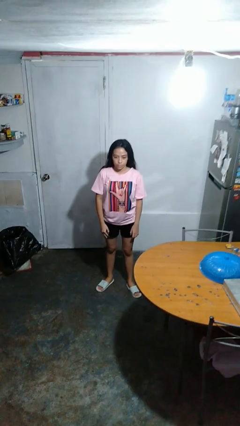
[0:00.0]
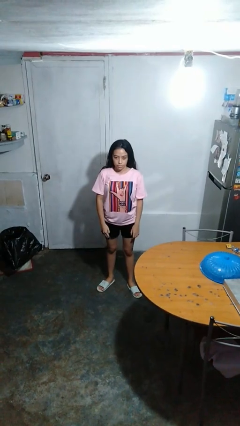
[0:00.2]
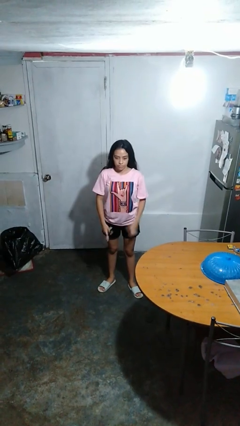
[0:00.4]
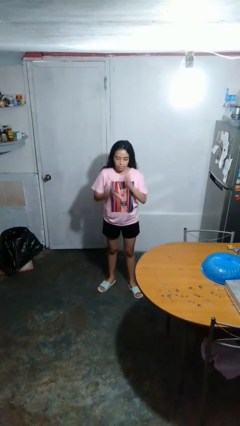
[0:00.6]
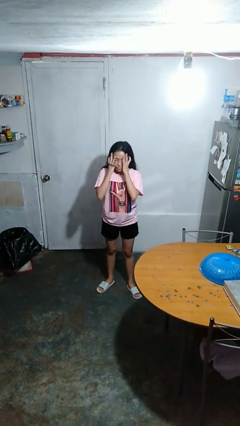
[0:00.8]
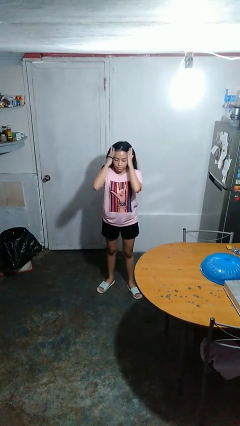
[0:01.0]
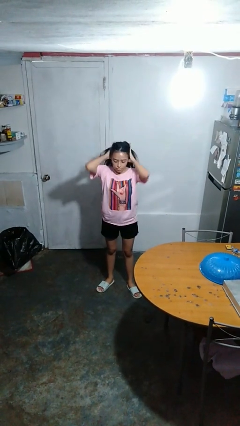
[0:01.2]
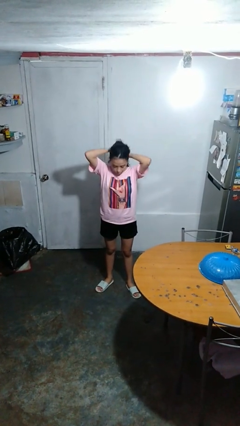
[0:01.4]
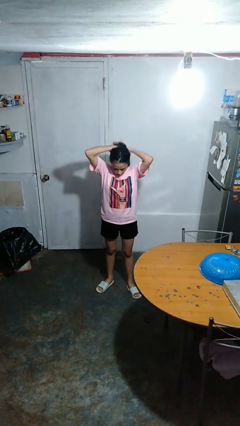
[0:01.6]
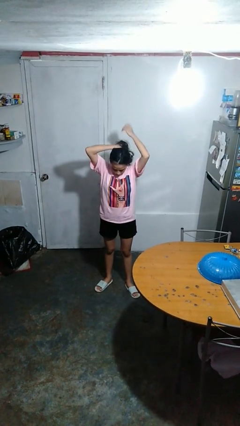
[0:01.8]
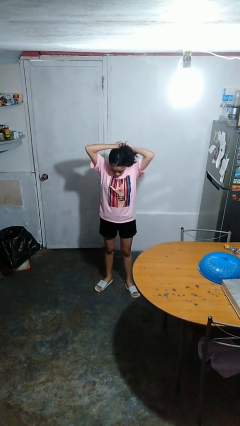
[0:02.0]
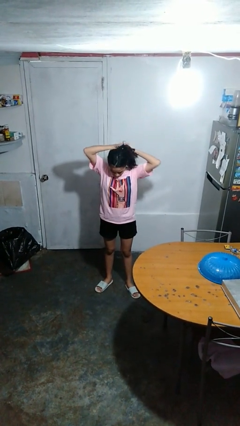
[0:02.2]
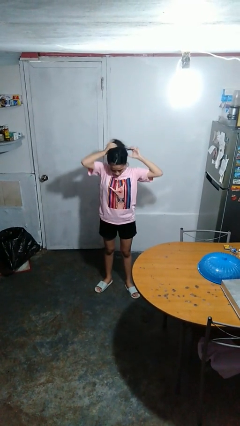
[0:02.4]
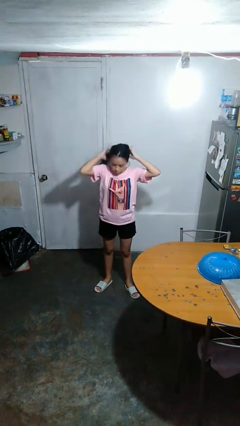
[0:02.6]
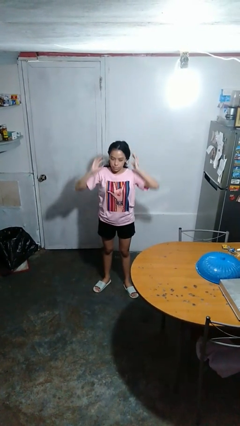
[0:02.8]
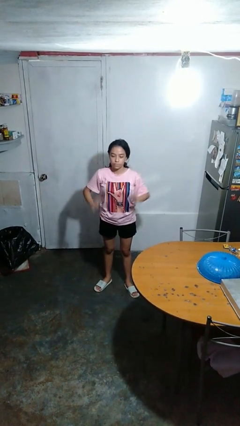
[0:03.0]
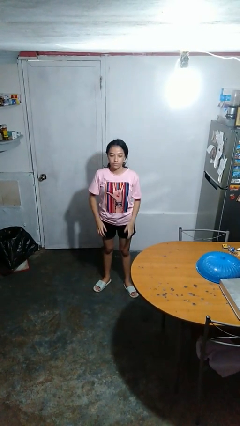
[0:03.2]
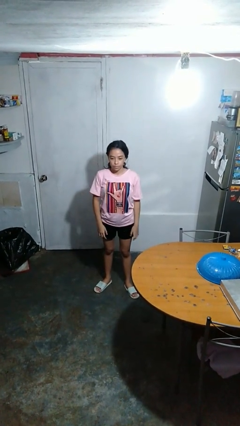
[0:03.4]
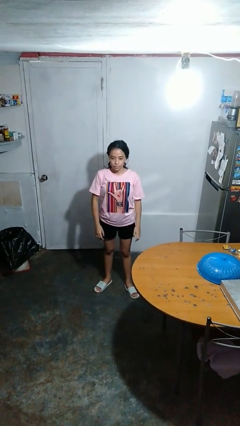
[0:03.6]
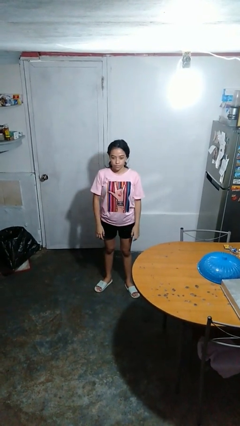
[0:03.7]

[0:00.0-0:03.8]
person puts hair in ponytail

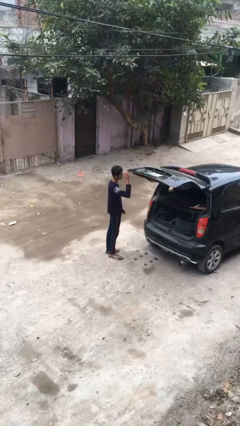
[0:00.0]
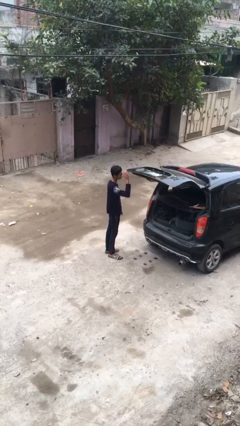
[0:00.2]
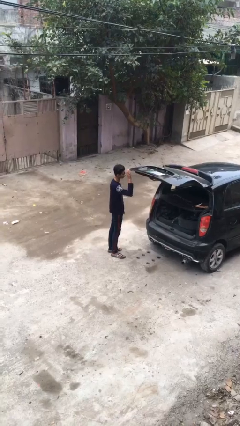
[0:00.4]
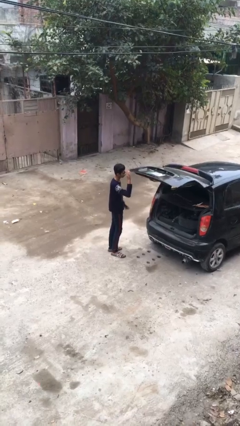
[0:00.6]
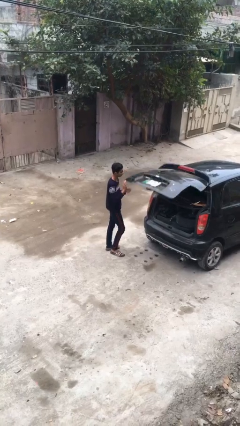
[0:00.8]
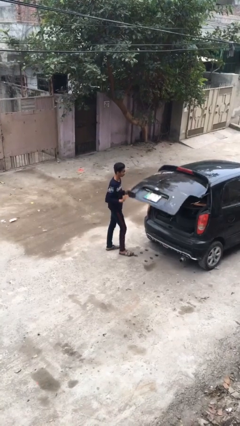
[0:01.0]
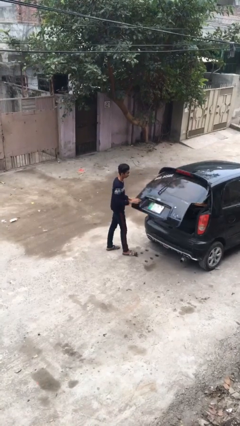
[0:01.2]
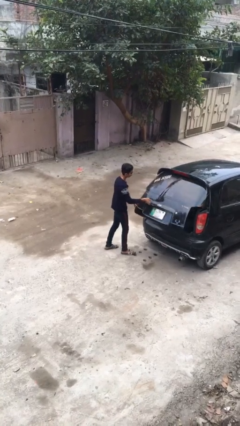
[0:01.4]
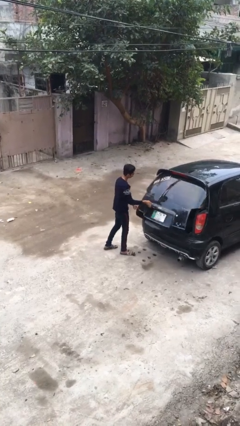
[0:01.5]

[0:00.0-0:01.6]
person closes car trunk

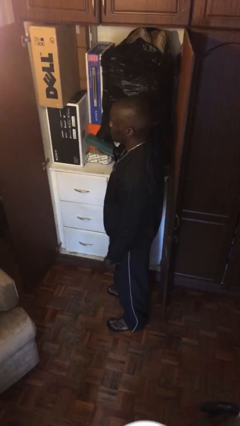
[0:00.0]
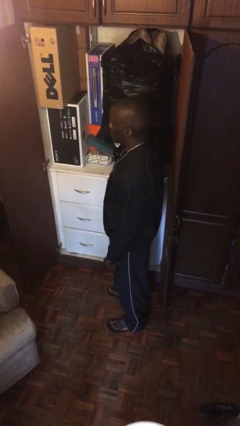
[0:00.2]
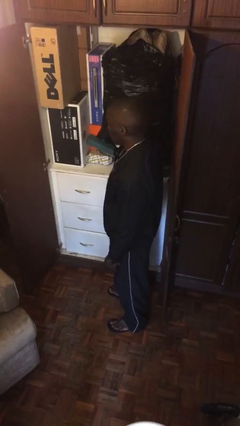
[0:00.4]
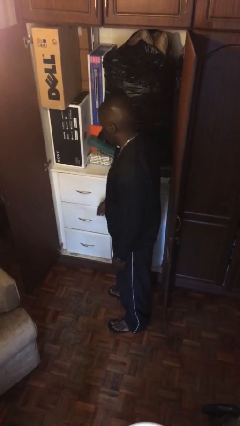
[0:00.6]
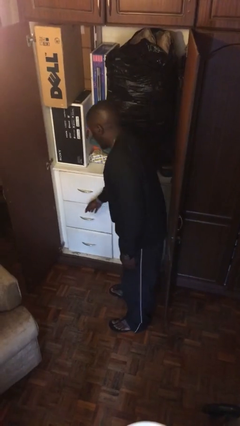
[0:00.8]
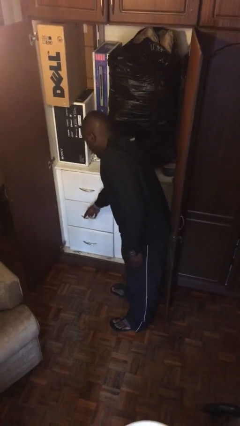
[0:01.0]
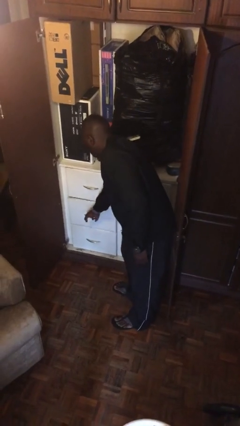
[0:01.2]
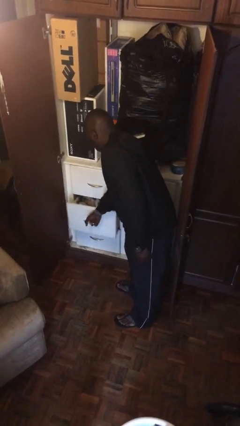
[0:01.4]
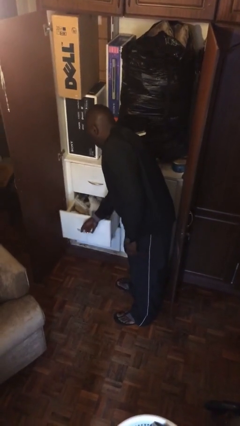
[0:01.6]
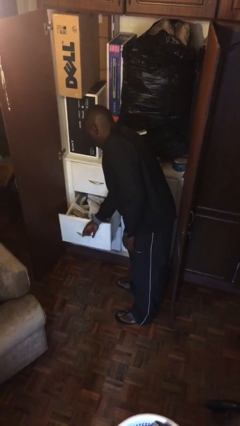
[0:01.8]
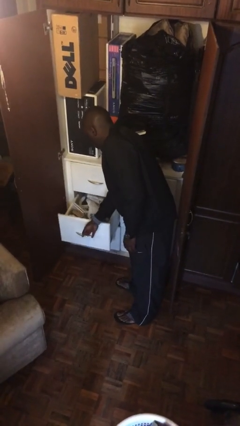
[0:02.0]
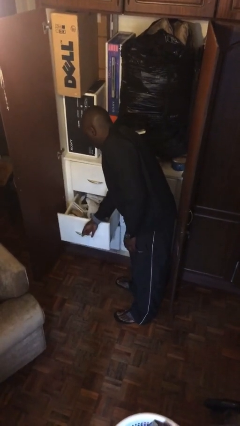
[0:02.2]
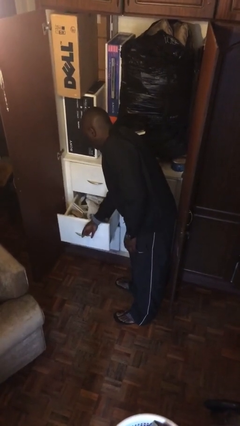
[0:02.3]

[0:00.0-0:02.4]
person opens dresser drawer

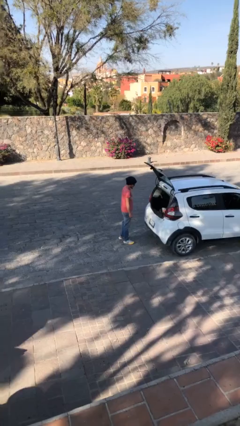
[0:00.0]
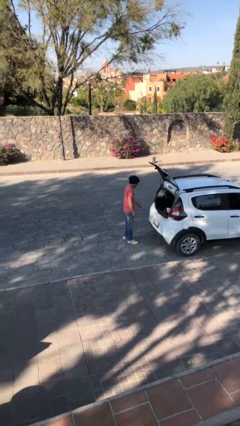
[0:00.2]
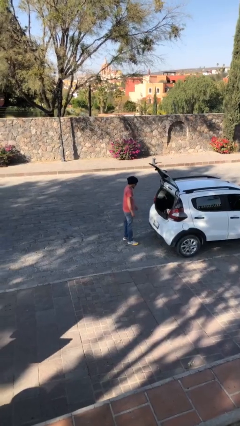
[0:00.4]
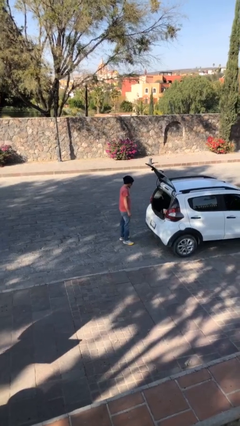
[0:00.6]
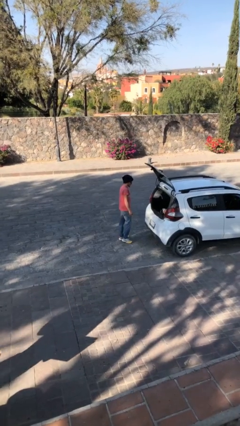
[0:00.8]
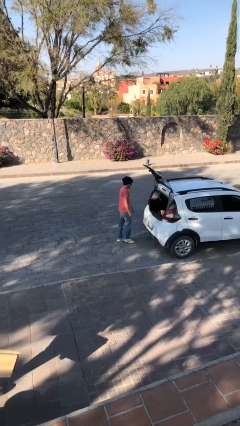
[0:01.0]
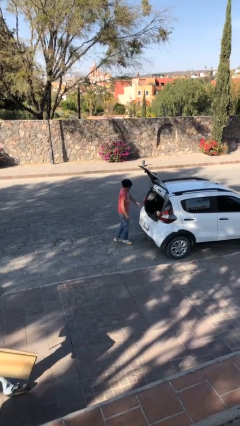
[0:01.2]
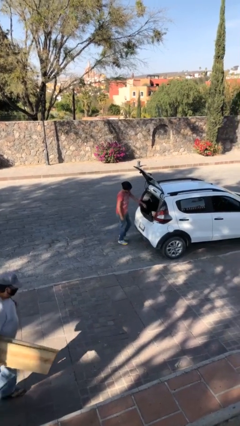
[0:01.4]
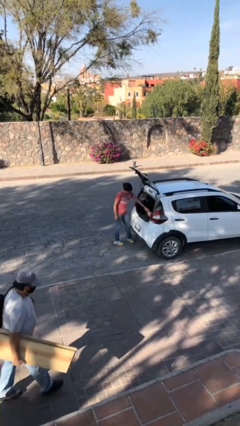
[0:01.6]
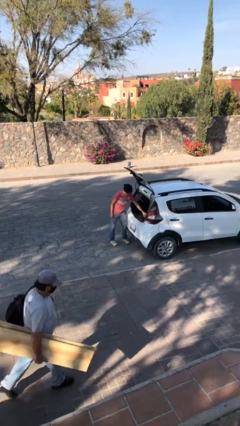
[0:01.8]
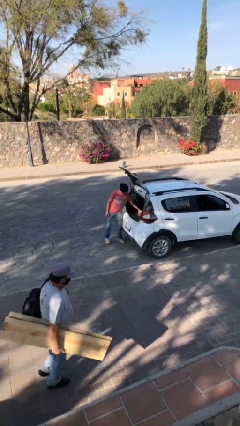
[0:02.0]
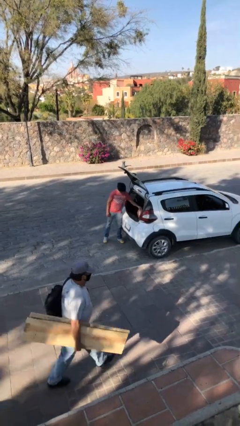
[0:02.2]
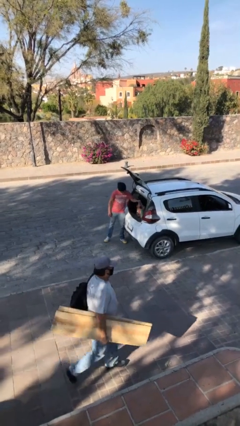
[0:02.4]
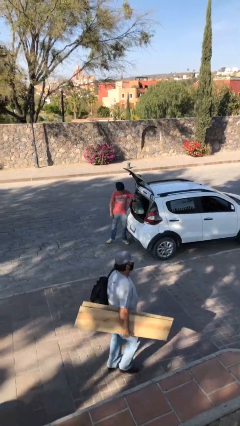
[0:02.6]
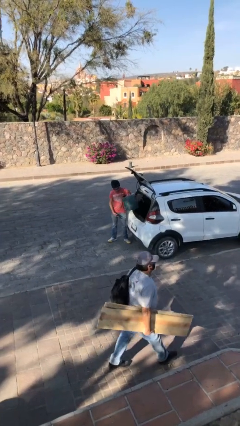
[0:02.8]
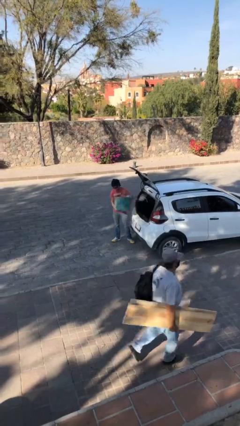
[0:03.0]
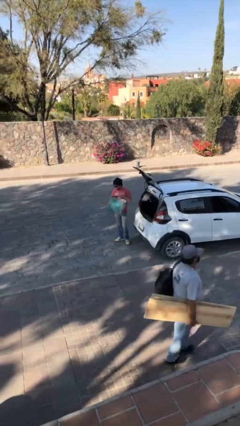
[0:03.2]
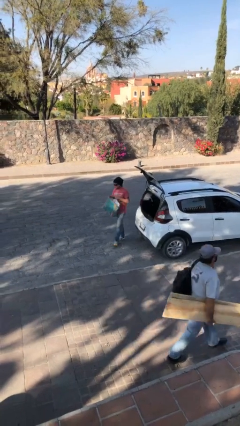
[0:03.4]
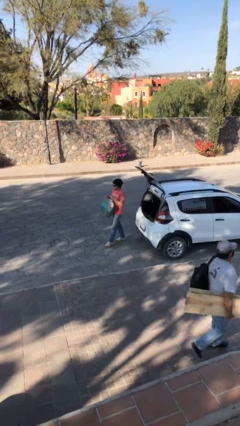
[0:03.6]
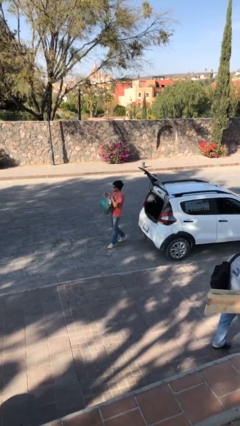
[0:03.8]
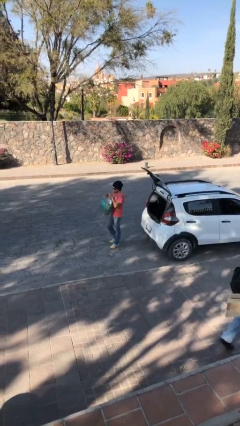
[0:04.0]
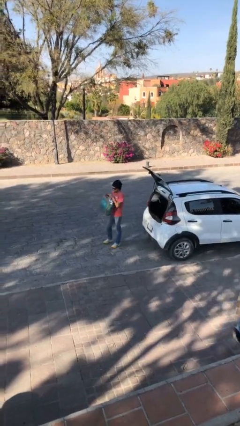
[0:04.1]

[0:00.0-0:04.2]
person unloads car

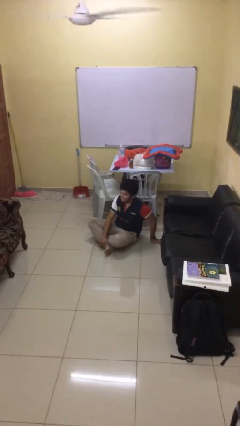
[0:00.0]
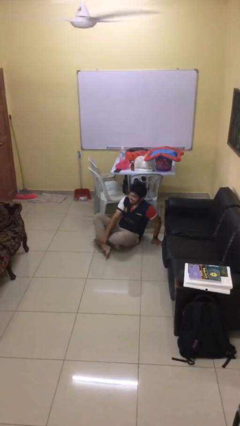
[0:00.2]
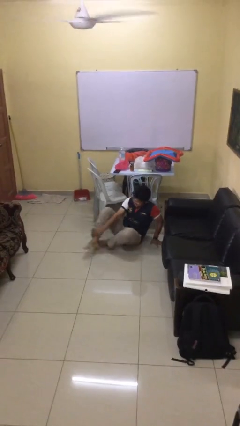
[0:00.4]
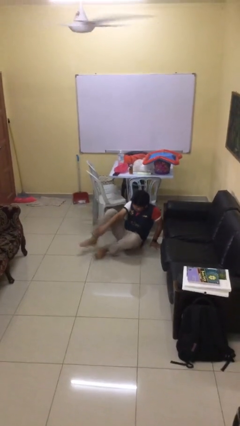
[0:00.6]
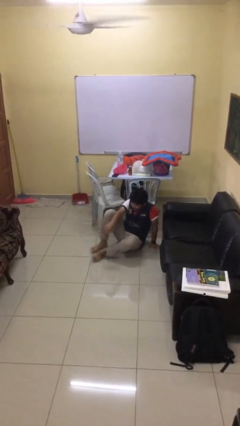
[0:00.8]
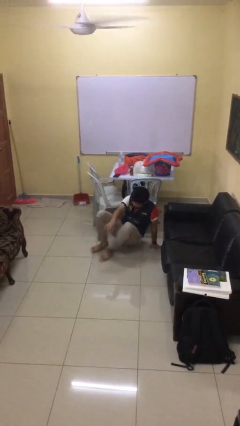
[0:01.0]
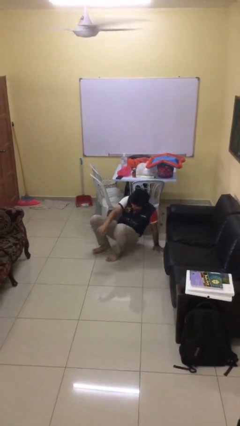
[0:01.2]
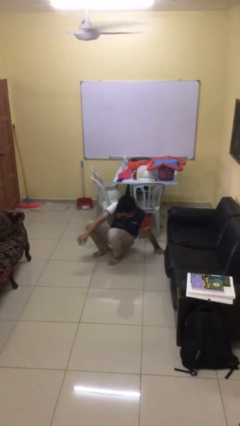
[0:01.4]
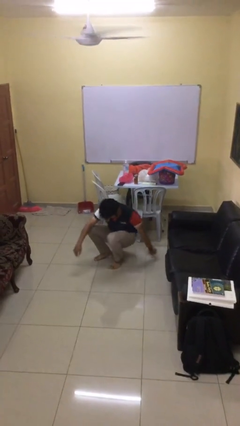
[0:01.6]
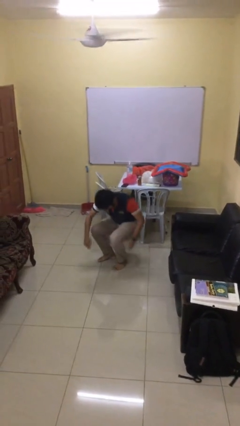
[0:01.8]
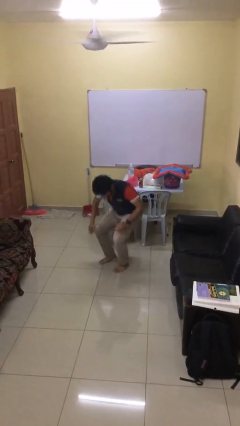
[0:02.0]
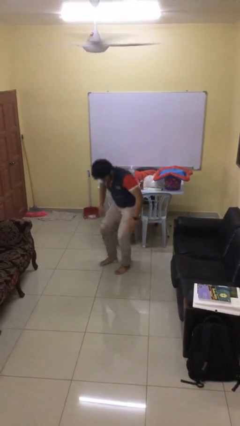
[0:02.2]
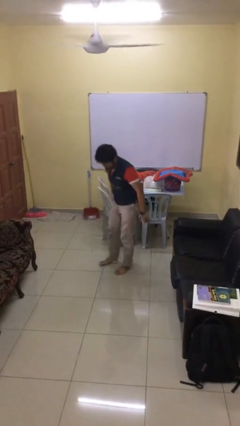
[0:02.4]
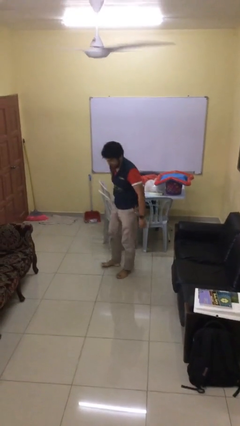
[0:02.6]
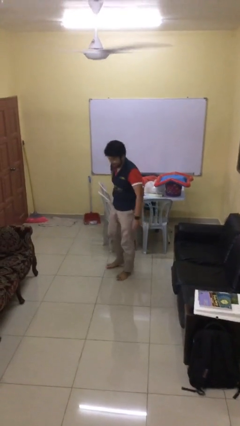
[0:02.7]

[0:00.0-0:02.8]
person stands up from floor

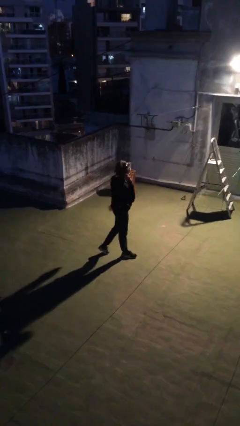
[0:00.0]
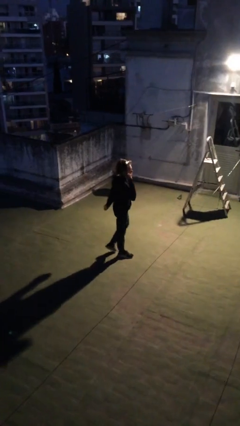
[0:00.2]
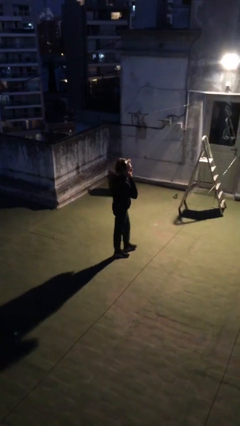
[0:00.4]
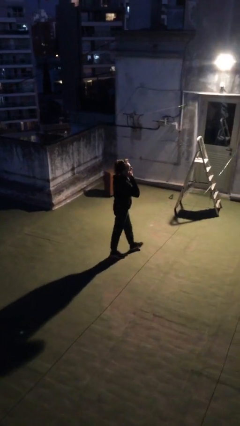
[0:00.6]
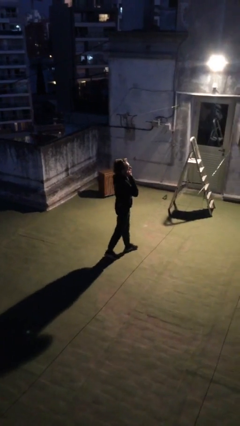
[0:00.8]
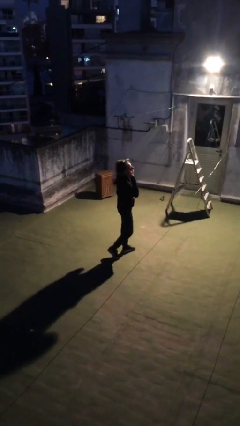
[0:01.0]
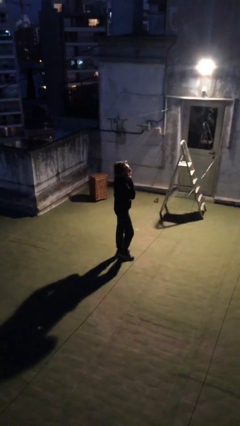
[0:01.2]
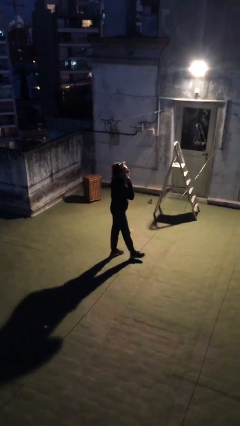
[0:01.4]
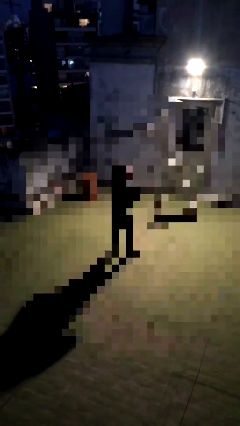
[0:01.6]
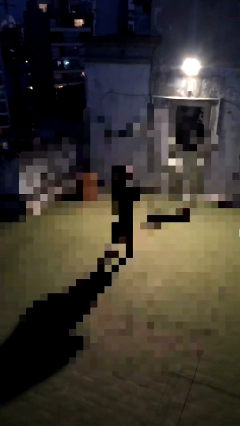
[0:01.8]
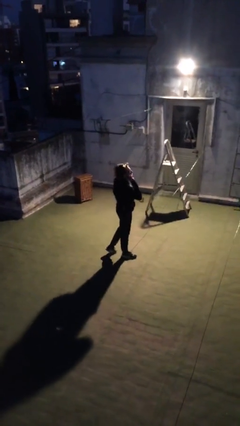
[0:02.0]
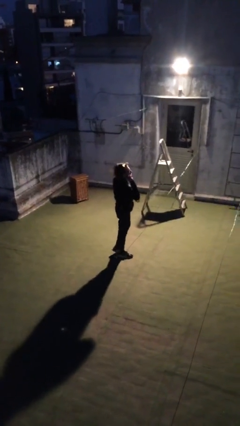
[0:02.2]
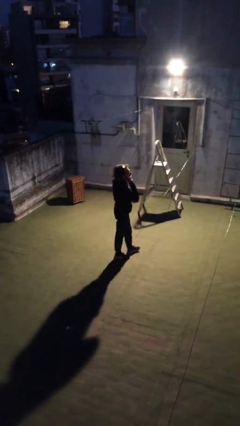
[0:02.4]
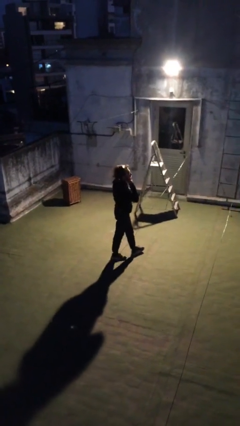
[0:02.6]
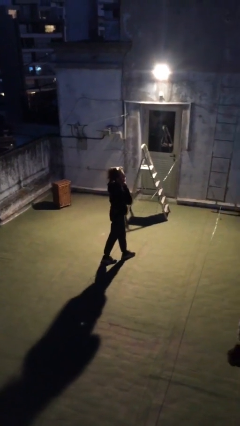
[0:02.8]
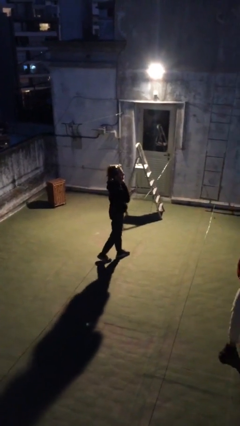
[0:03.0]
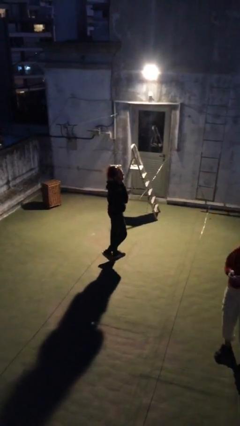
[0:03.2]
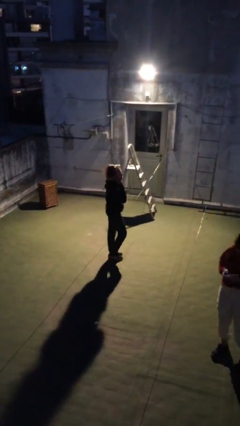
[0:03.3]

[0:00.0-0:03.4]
person talks on phone
